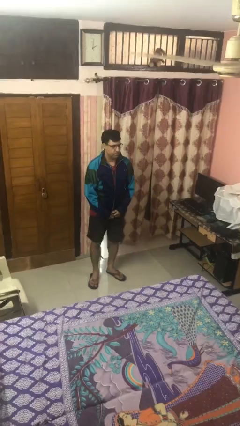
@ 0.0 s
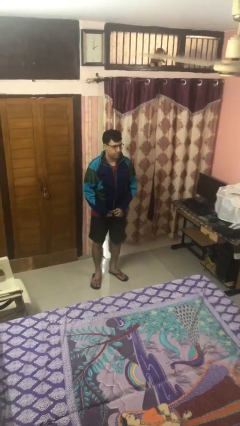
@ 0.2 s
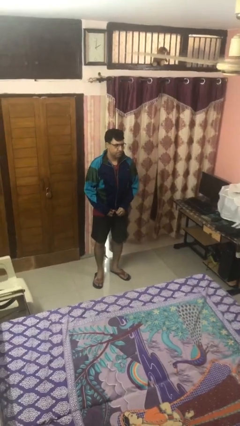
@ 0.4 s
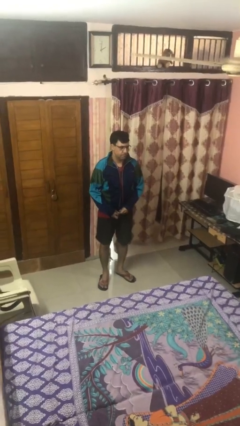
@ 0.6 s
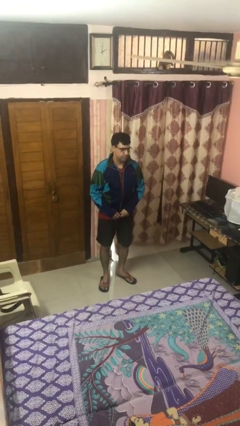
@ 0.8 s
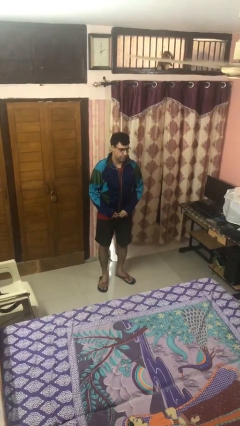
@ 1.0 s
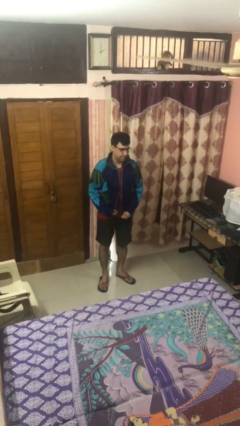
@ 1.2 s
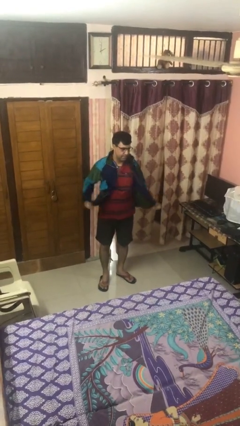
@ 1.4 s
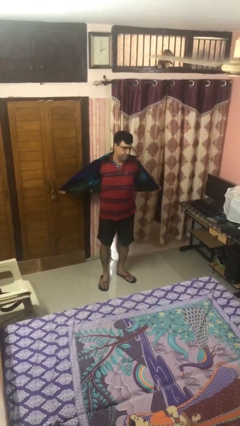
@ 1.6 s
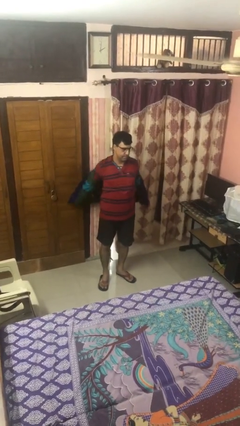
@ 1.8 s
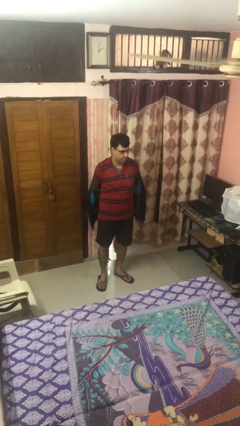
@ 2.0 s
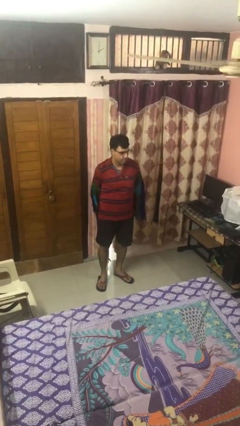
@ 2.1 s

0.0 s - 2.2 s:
person takes off jacket

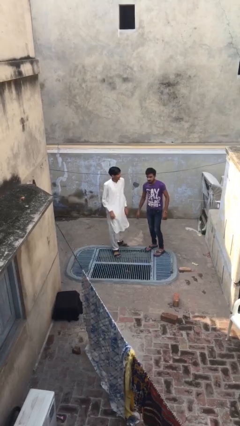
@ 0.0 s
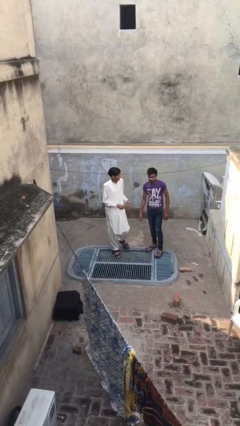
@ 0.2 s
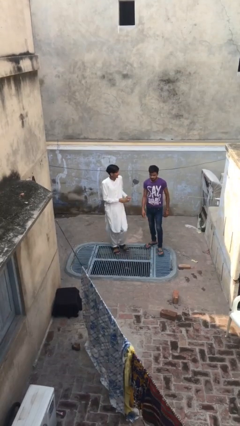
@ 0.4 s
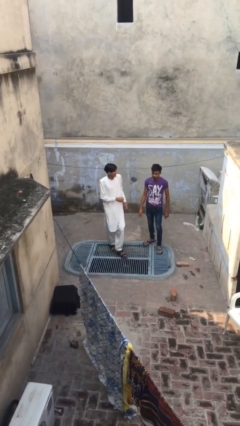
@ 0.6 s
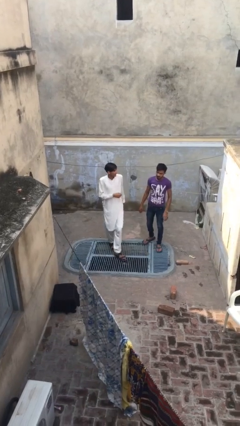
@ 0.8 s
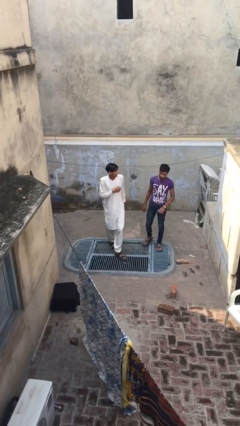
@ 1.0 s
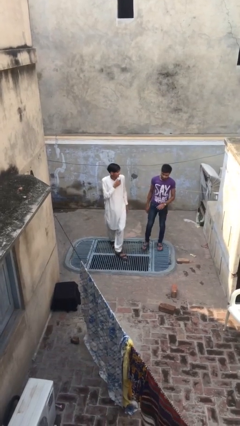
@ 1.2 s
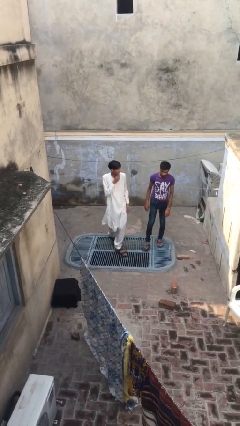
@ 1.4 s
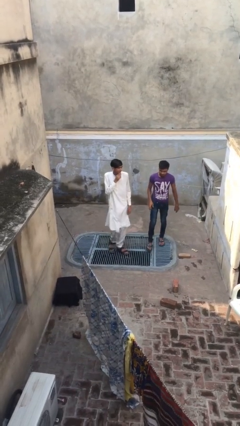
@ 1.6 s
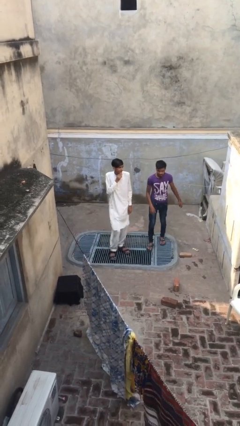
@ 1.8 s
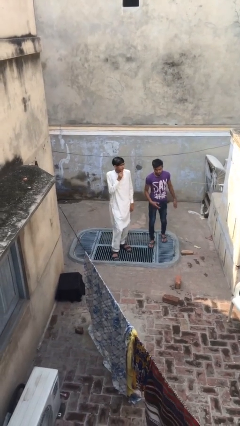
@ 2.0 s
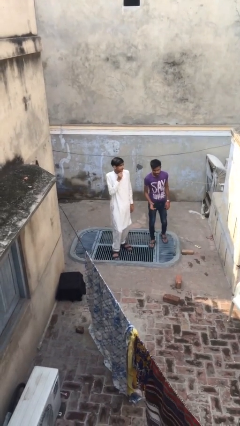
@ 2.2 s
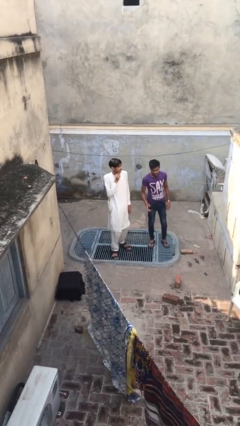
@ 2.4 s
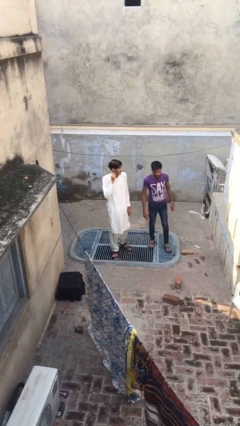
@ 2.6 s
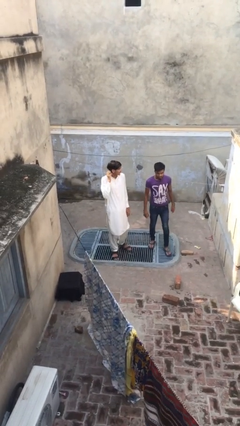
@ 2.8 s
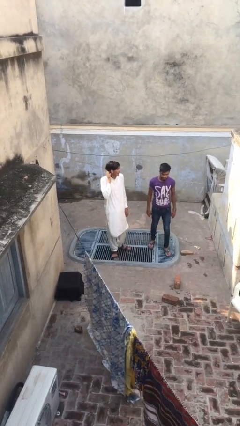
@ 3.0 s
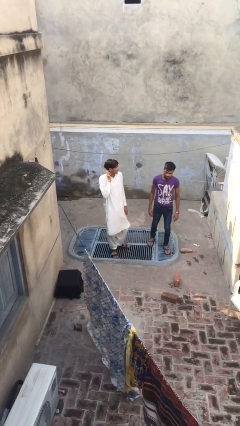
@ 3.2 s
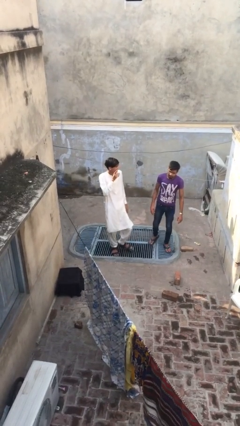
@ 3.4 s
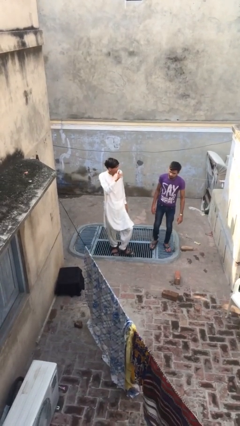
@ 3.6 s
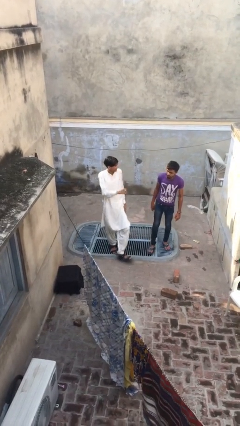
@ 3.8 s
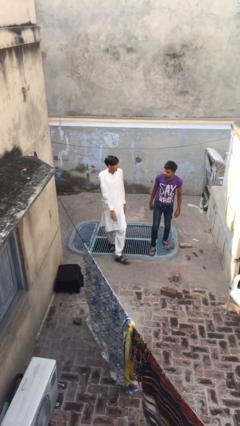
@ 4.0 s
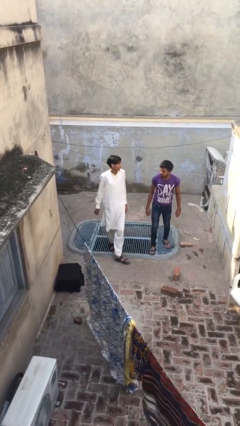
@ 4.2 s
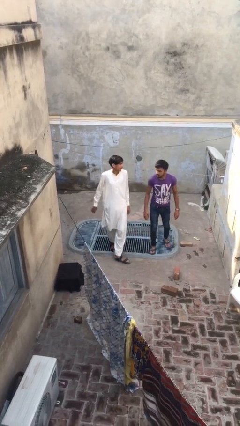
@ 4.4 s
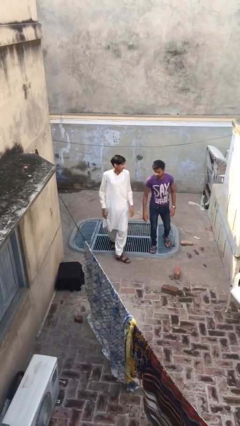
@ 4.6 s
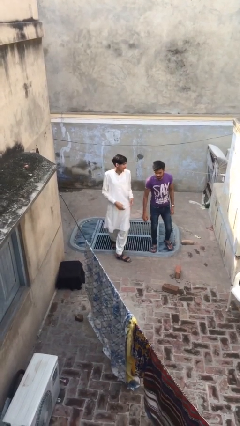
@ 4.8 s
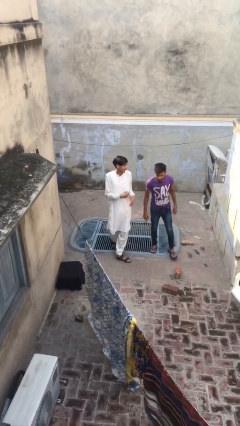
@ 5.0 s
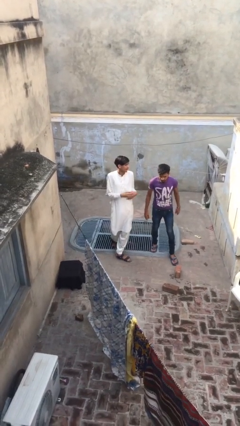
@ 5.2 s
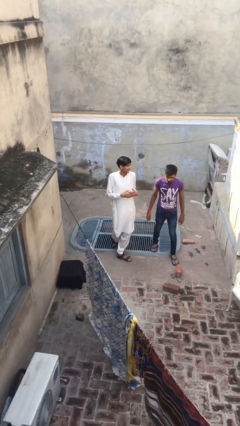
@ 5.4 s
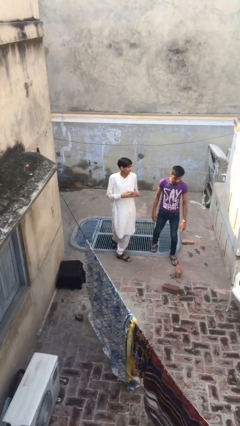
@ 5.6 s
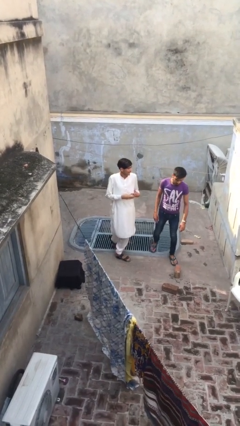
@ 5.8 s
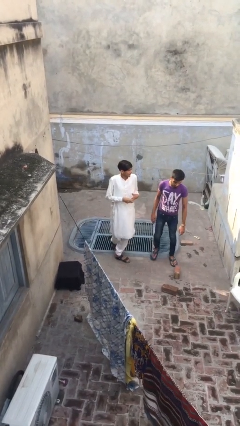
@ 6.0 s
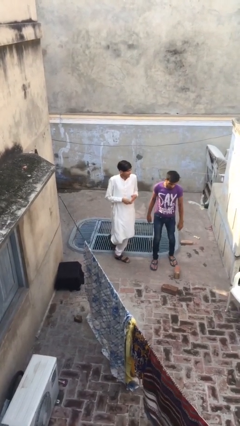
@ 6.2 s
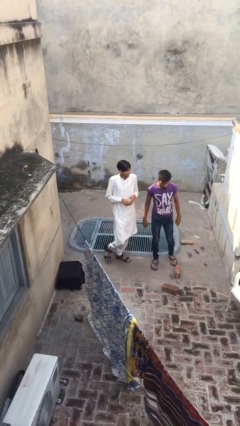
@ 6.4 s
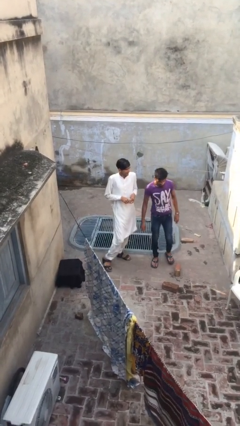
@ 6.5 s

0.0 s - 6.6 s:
person talks to person

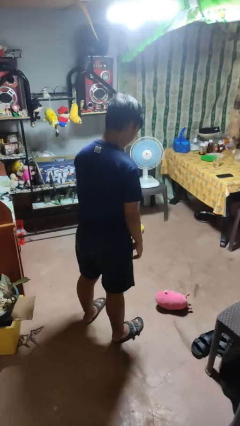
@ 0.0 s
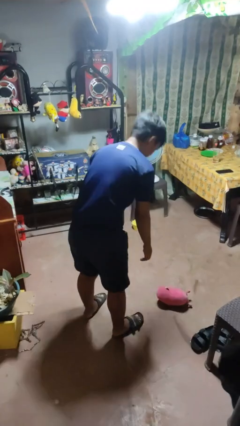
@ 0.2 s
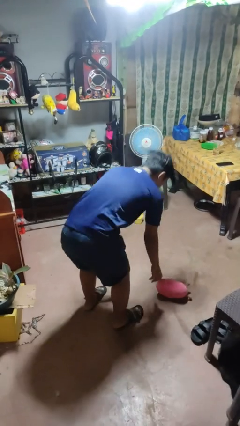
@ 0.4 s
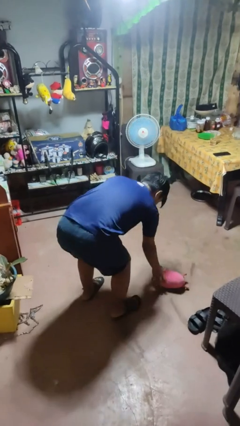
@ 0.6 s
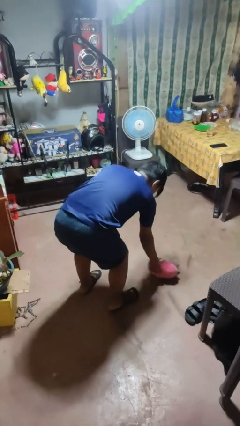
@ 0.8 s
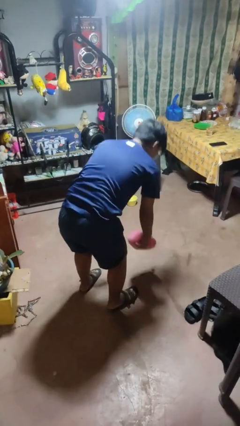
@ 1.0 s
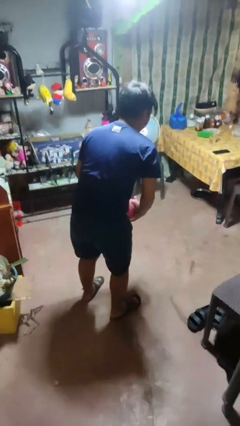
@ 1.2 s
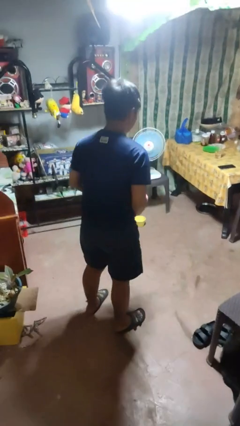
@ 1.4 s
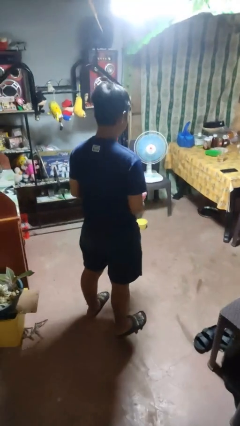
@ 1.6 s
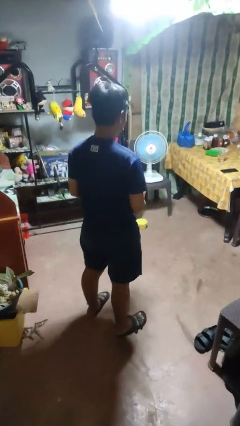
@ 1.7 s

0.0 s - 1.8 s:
person picks up object from floor

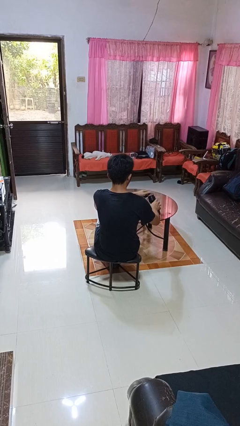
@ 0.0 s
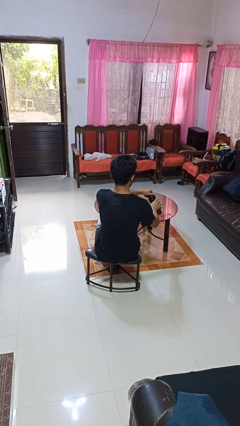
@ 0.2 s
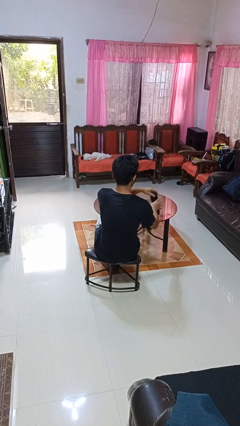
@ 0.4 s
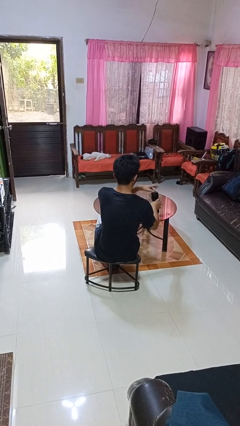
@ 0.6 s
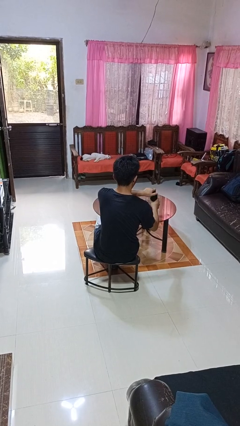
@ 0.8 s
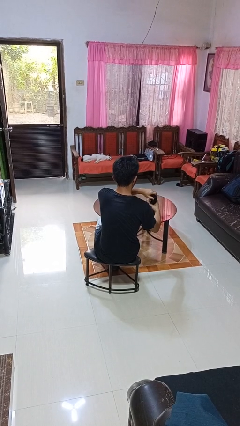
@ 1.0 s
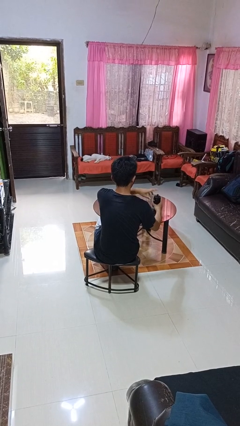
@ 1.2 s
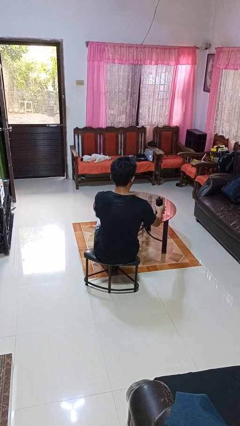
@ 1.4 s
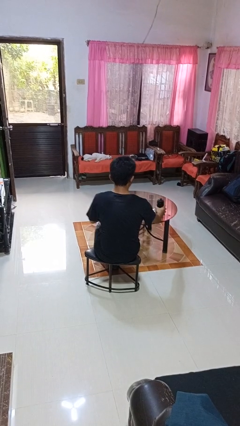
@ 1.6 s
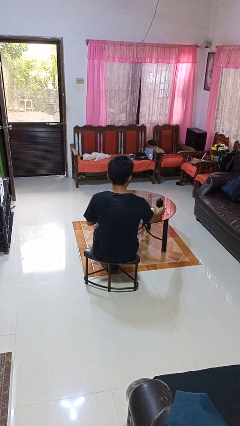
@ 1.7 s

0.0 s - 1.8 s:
person screws lid to bottle

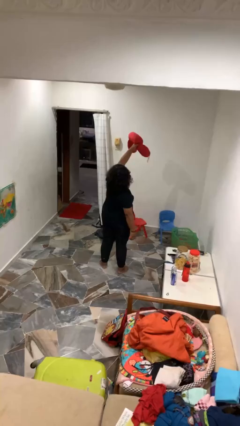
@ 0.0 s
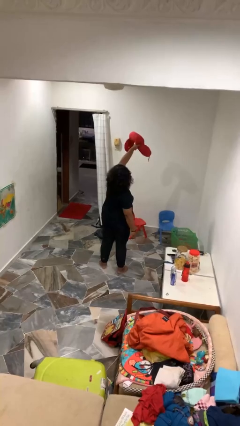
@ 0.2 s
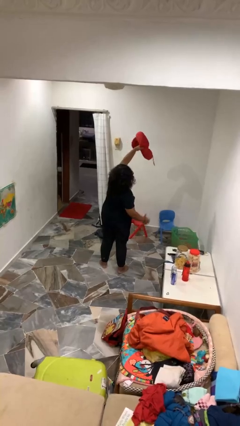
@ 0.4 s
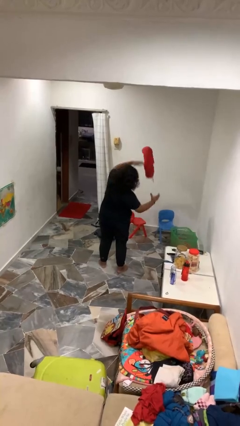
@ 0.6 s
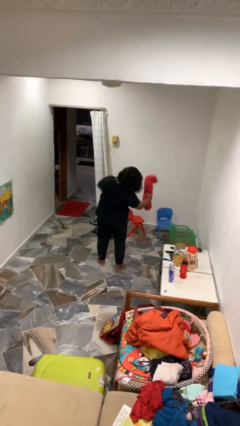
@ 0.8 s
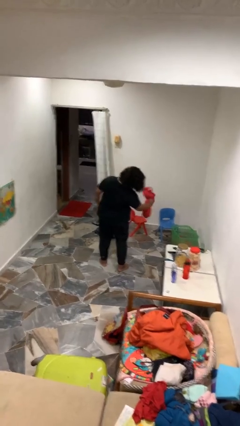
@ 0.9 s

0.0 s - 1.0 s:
person drops object

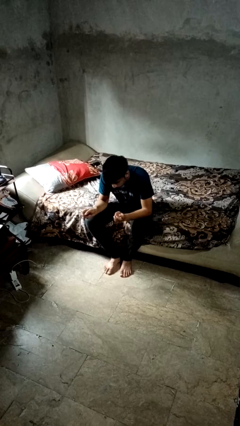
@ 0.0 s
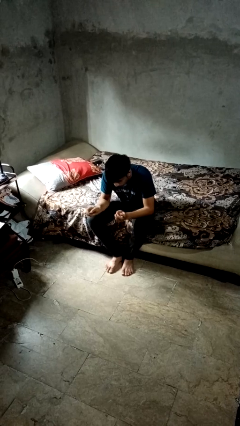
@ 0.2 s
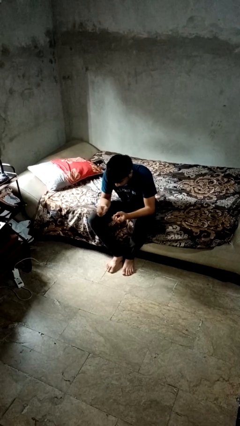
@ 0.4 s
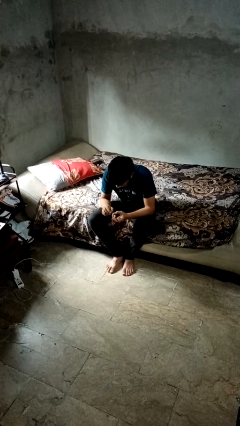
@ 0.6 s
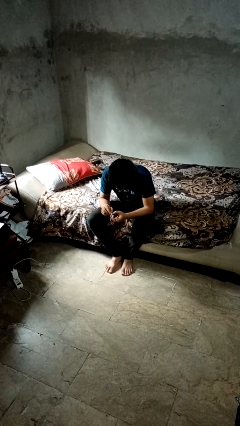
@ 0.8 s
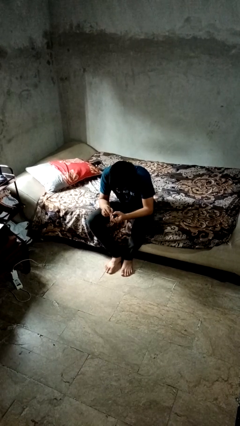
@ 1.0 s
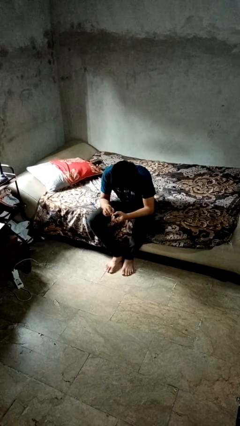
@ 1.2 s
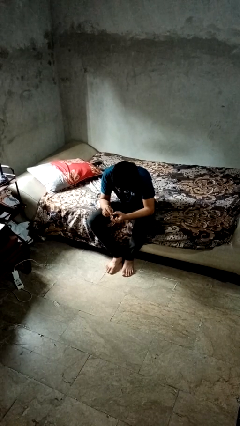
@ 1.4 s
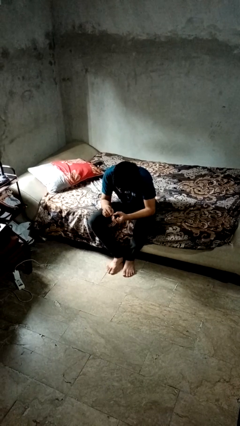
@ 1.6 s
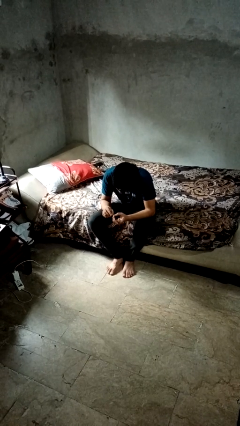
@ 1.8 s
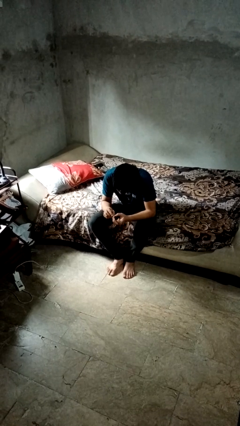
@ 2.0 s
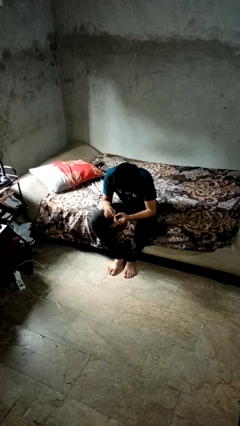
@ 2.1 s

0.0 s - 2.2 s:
person files fingernails

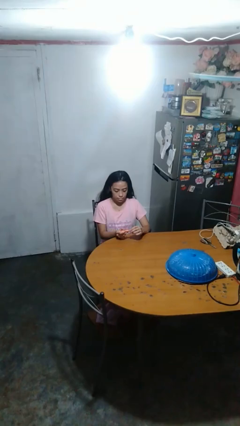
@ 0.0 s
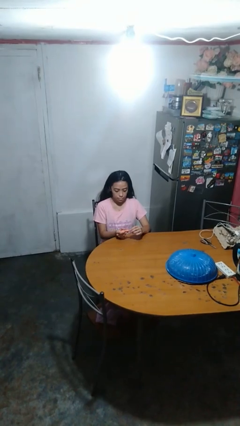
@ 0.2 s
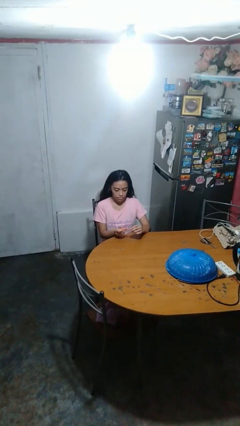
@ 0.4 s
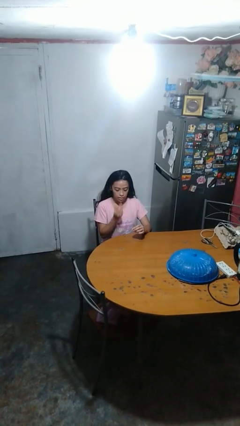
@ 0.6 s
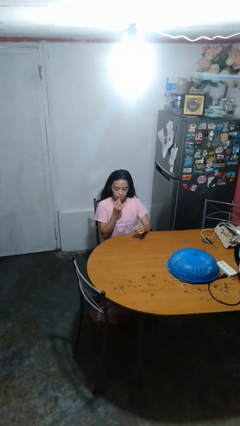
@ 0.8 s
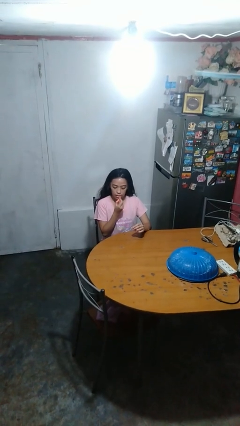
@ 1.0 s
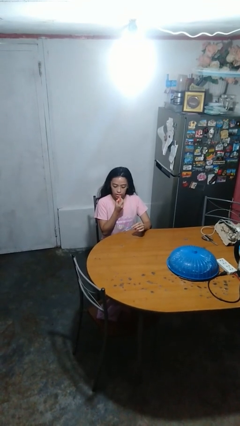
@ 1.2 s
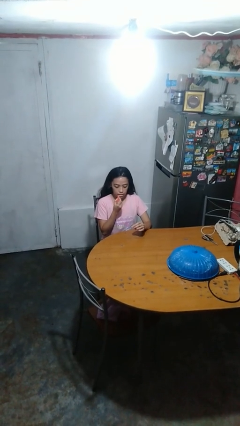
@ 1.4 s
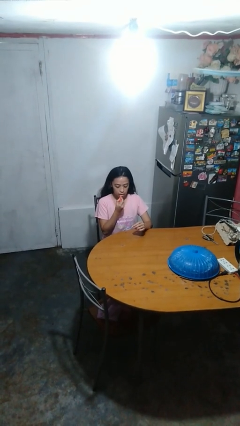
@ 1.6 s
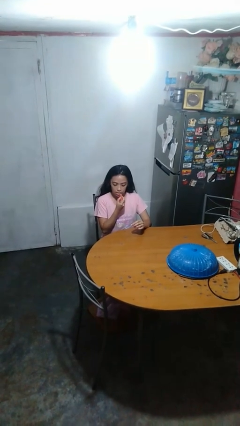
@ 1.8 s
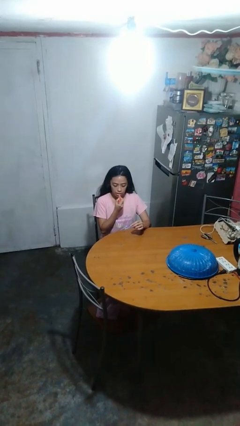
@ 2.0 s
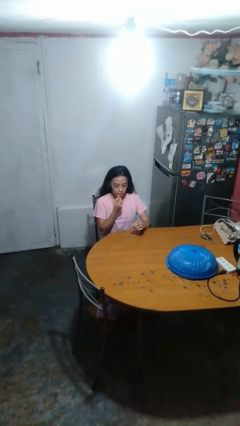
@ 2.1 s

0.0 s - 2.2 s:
person applies lip makeup
